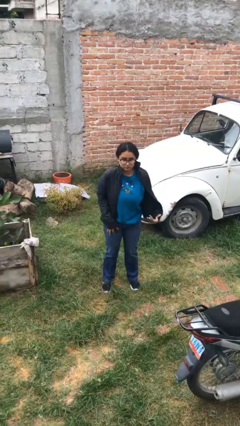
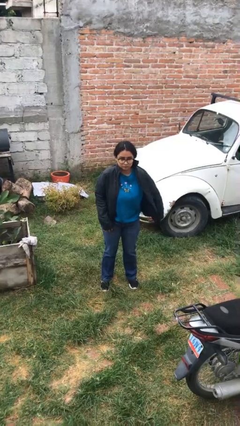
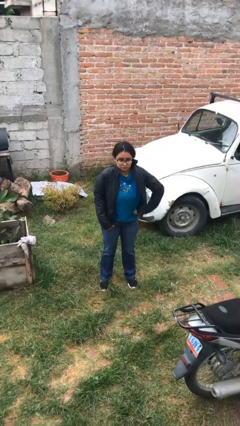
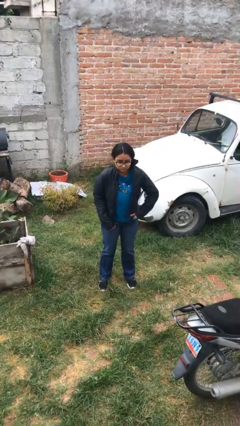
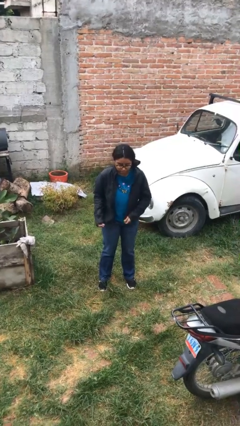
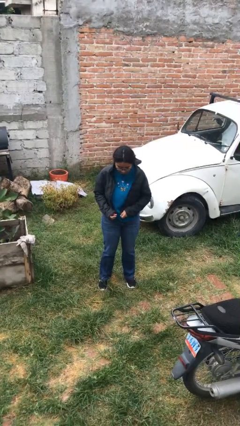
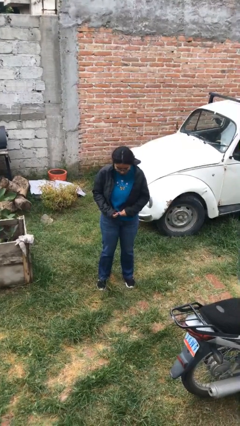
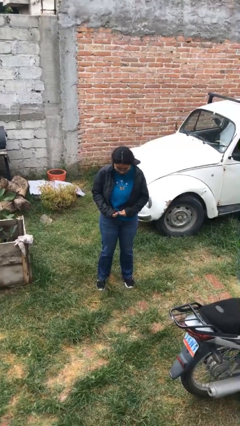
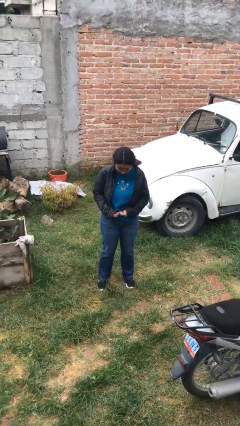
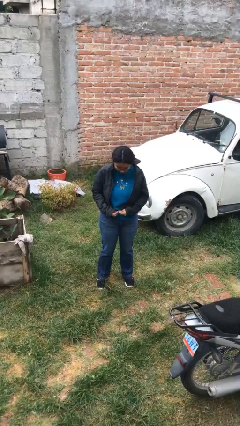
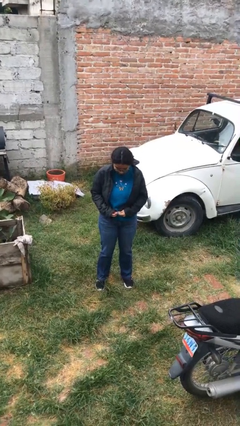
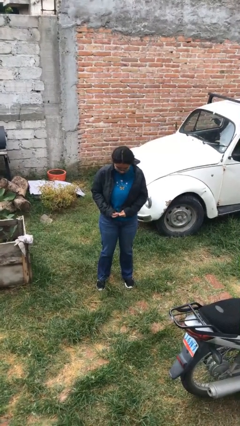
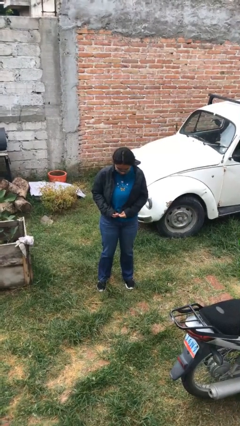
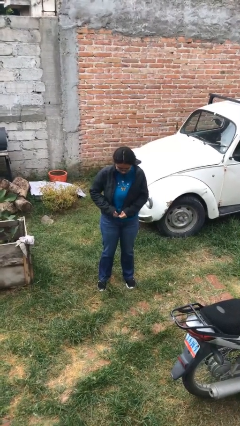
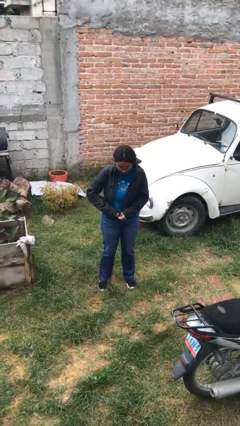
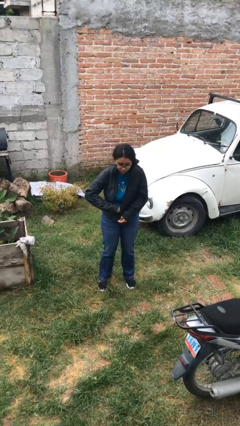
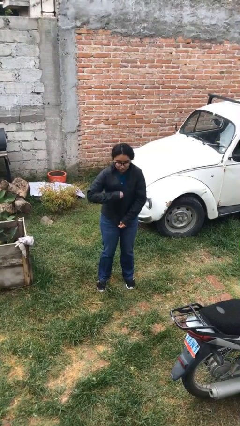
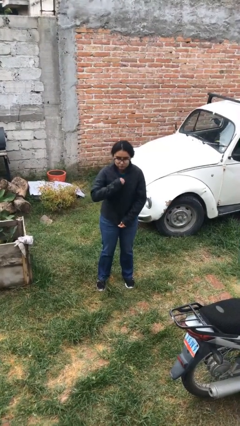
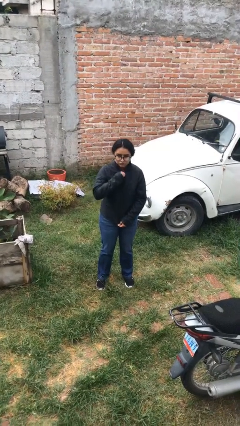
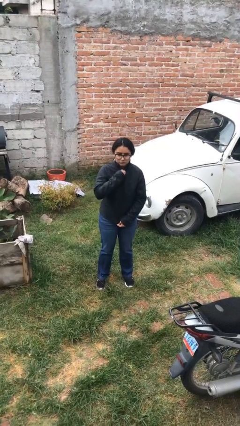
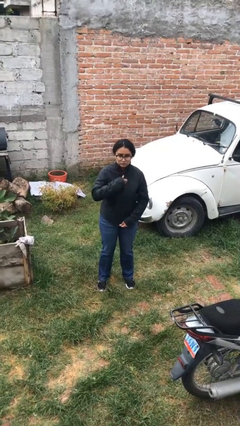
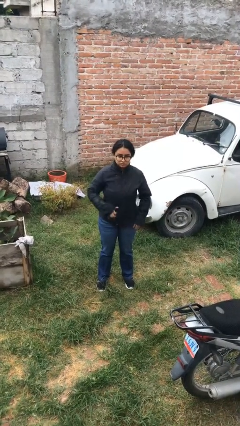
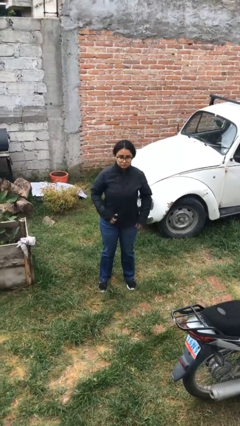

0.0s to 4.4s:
person zips up jacket

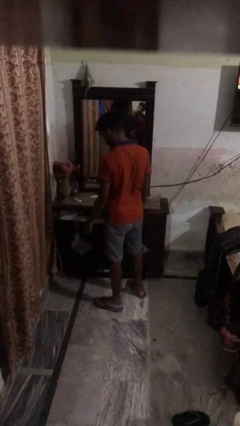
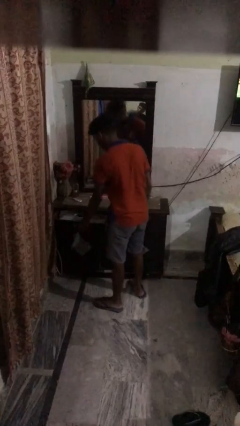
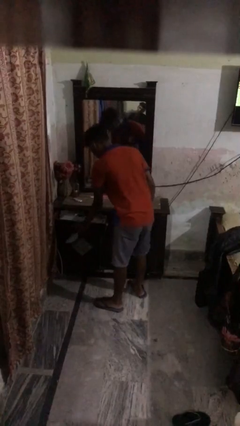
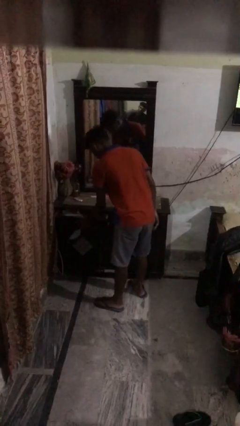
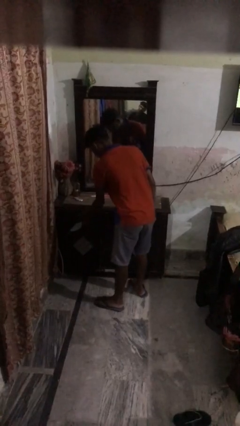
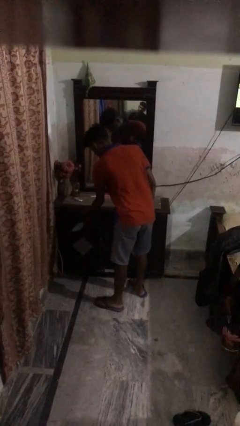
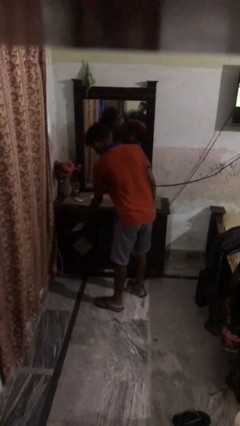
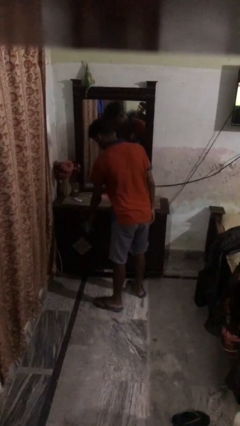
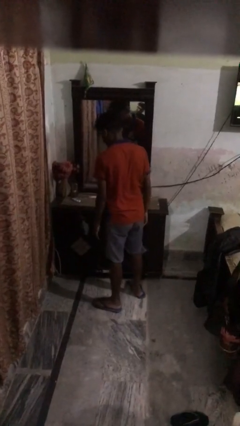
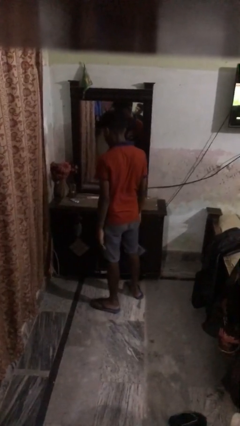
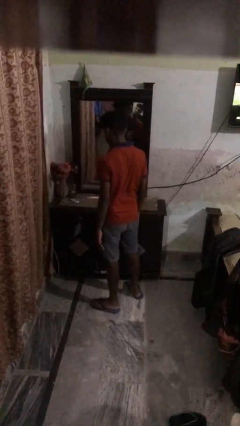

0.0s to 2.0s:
person closes dresser drawer

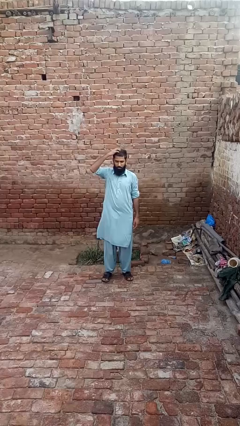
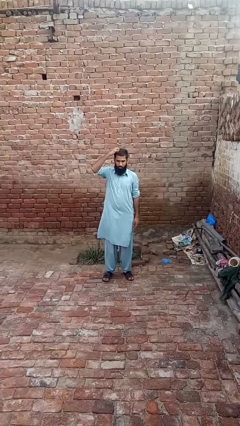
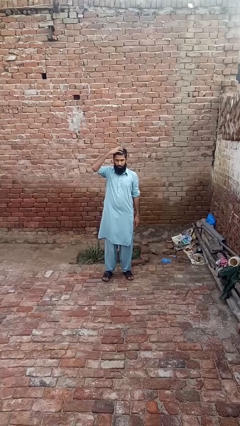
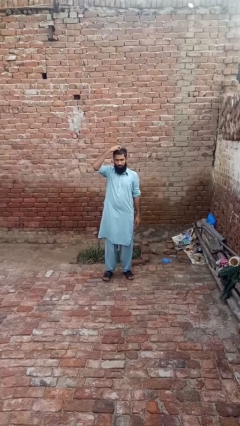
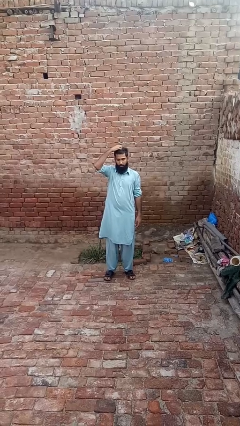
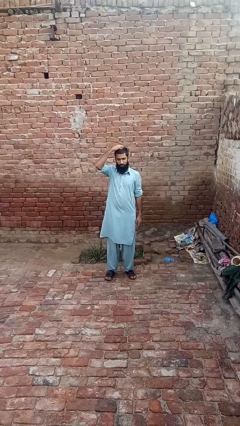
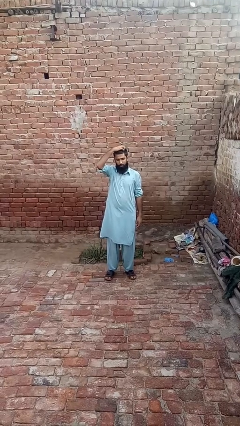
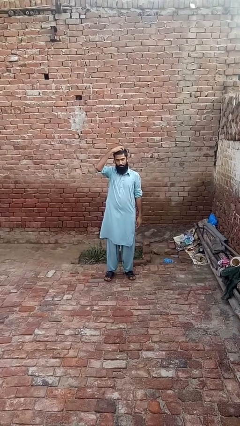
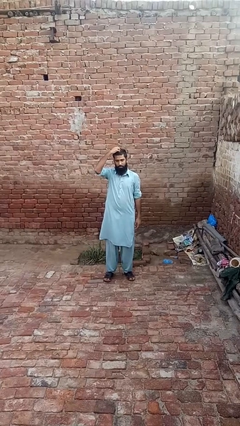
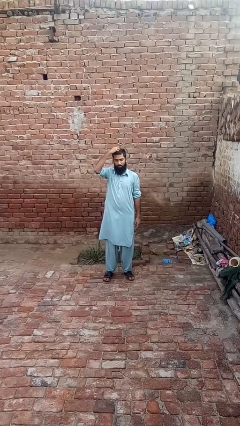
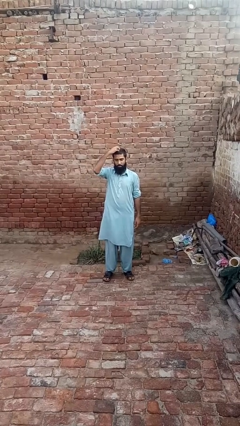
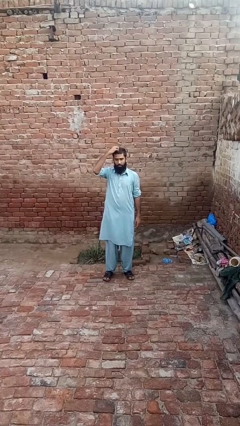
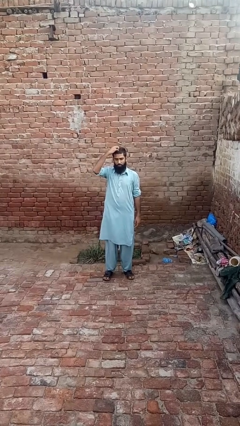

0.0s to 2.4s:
person scratches face

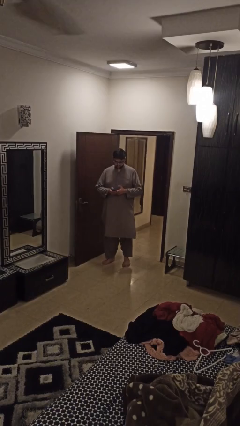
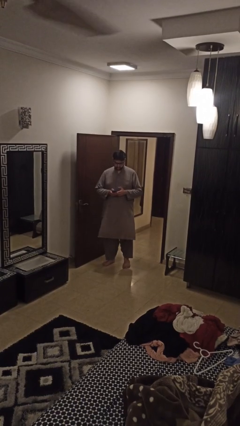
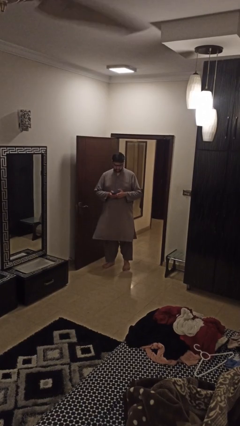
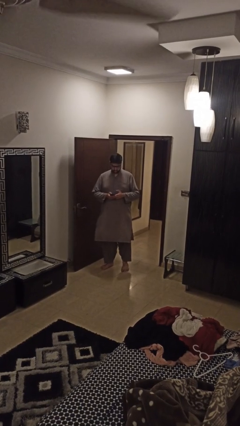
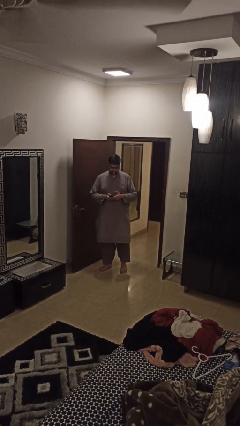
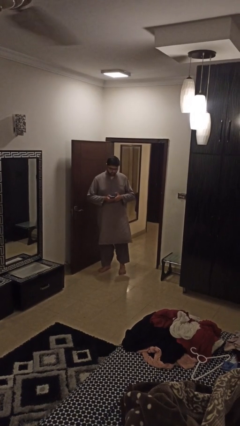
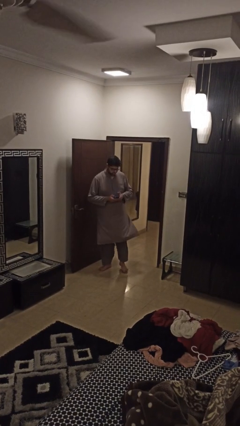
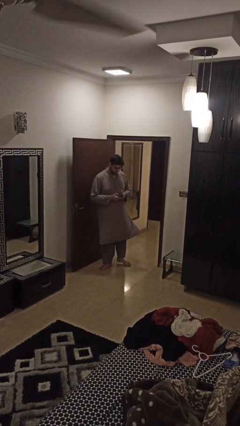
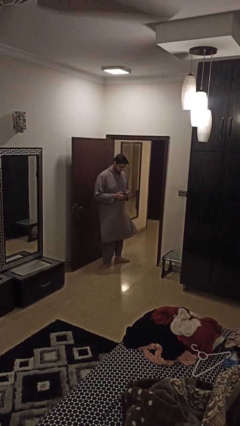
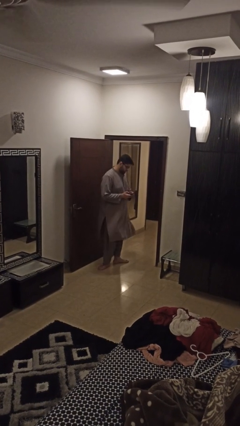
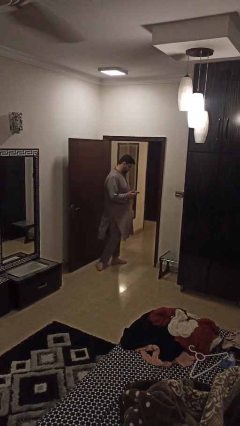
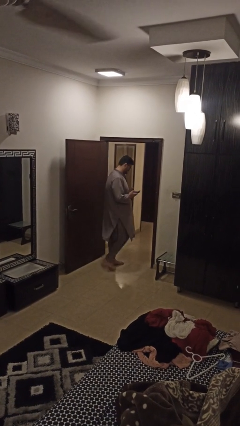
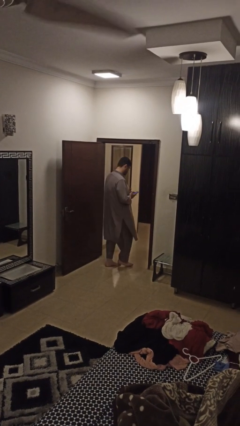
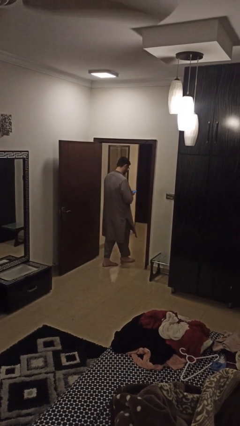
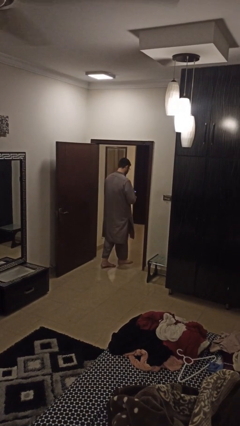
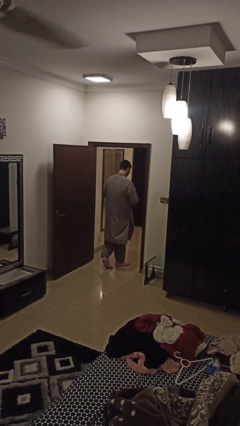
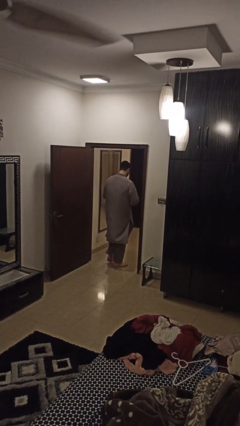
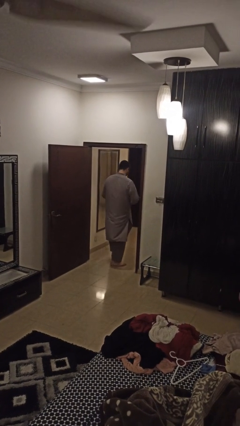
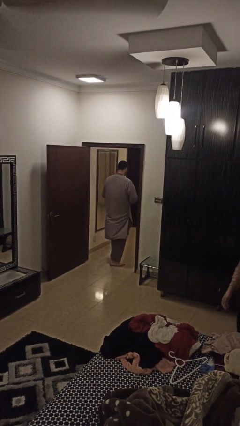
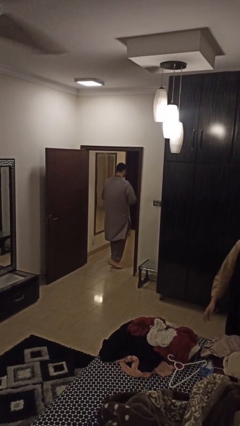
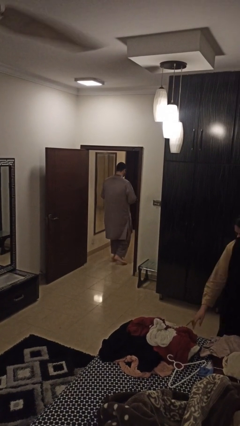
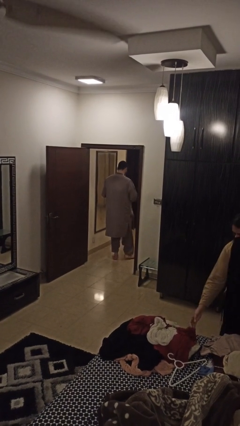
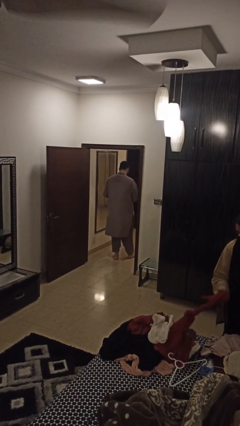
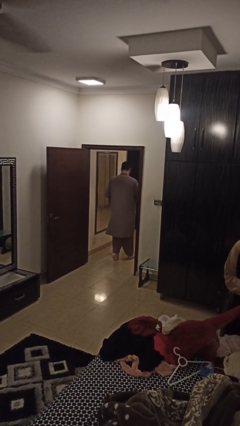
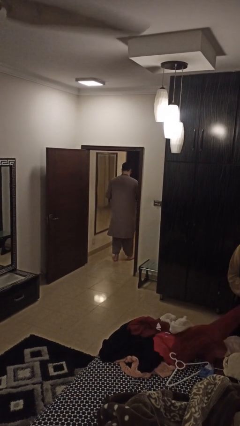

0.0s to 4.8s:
person exits scene through structure

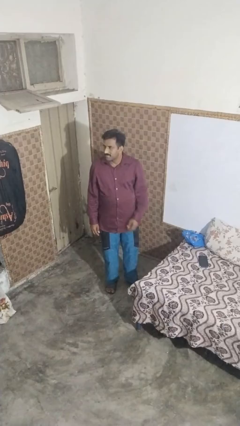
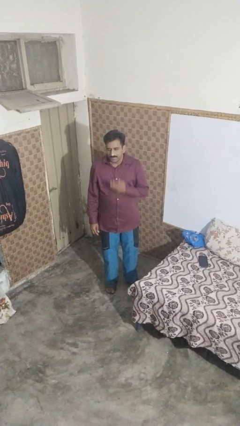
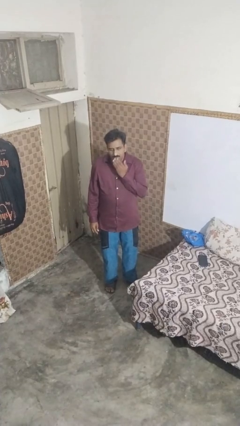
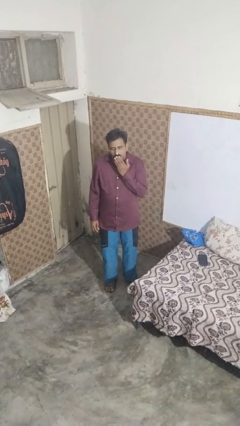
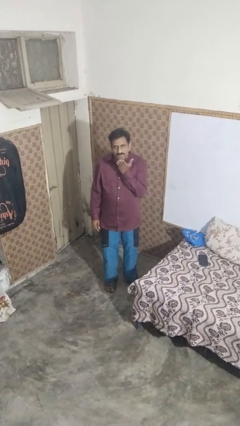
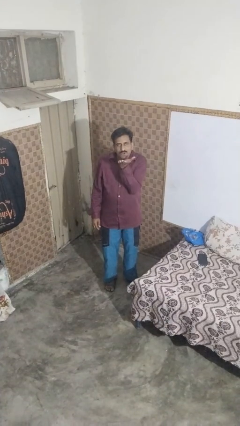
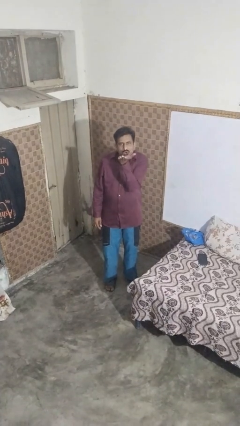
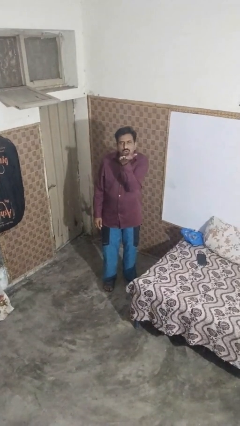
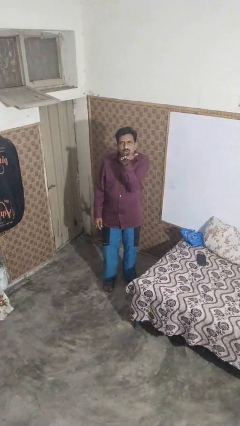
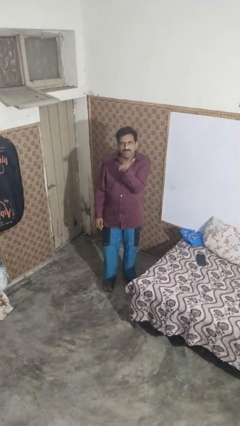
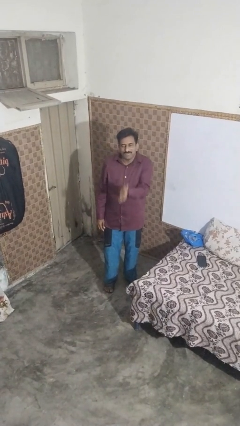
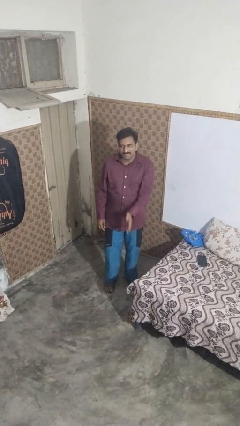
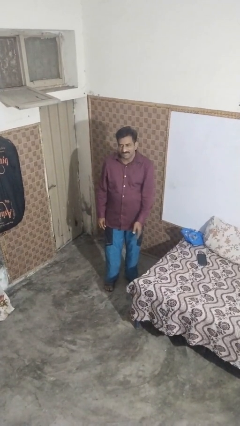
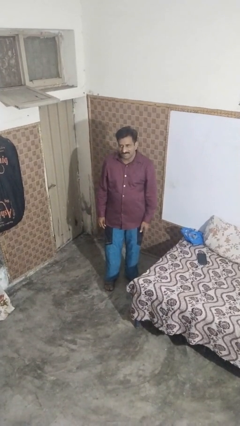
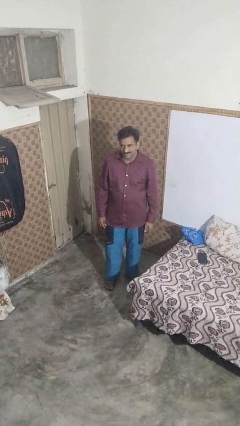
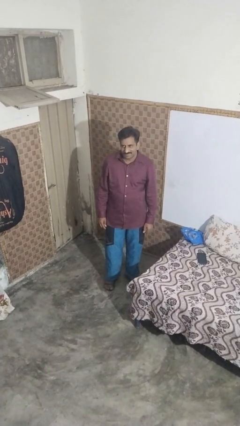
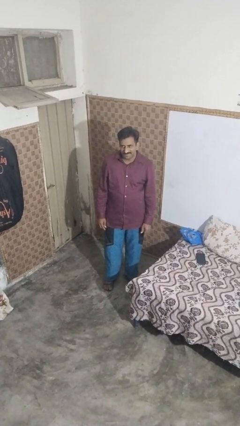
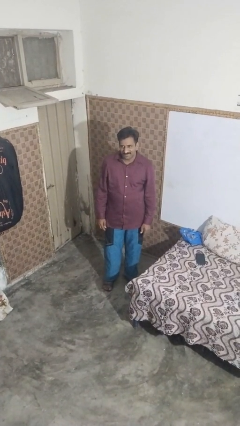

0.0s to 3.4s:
person gestures blow kiss

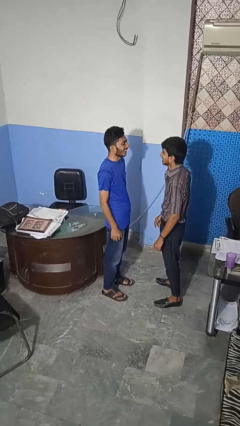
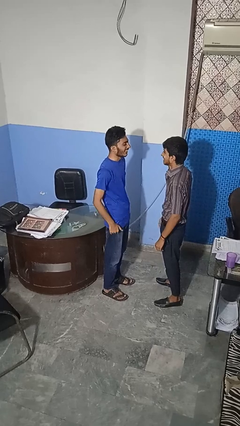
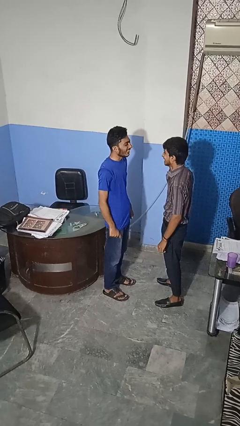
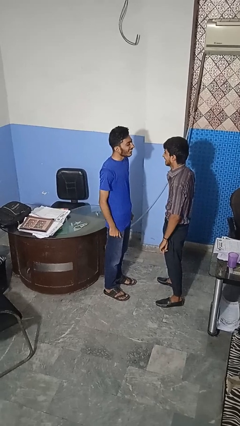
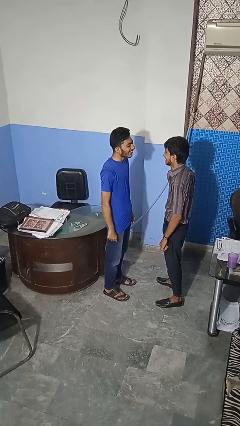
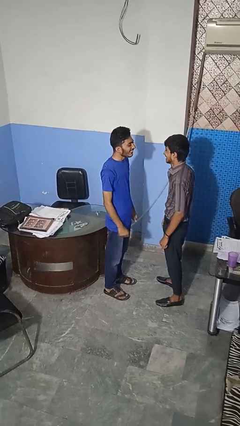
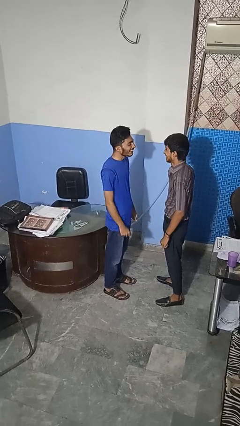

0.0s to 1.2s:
person kisses cheek of person
